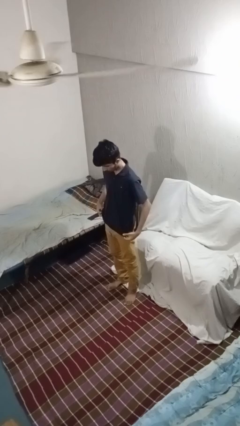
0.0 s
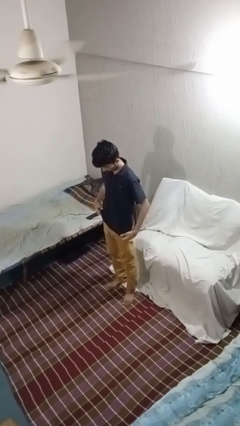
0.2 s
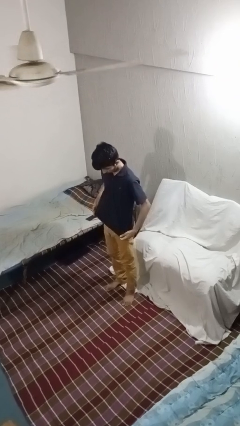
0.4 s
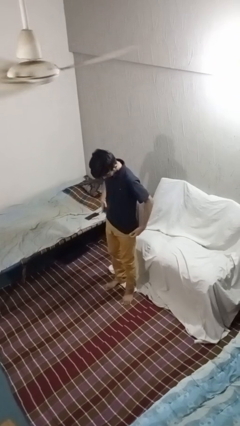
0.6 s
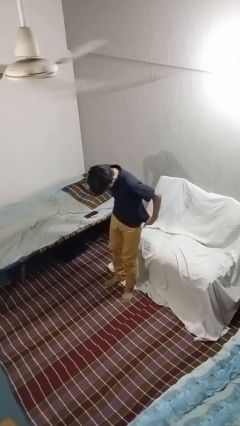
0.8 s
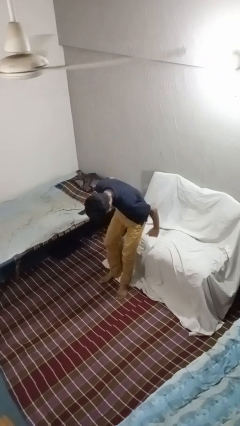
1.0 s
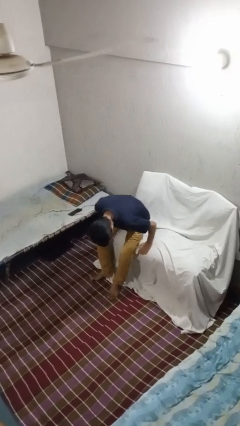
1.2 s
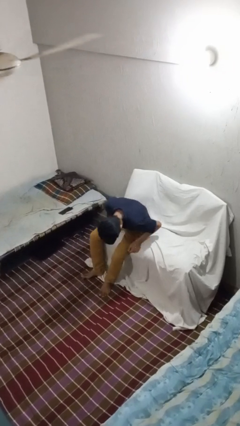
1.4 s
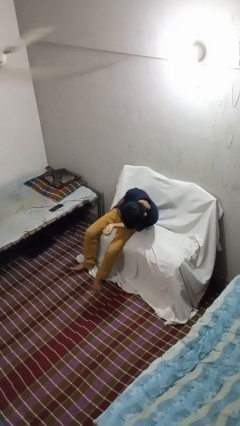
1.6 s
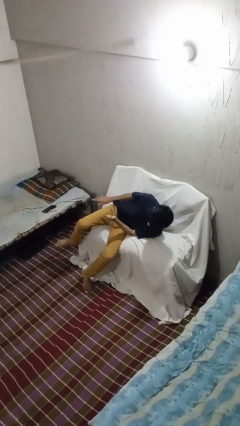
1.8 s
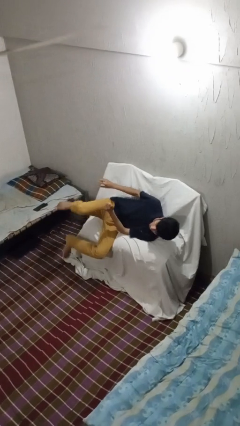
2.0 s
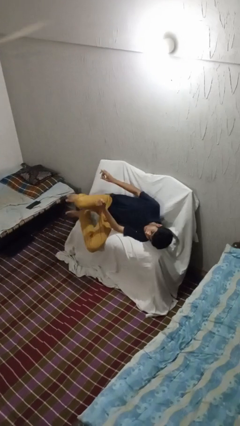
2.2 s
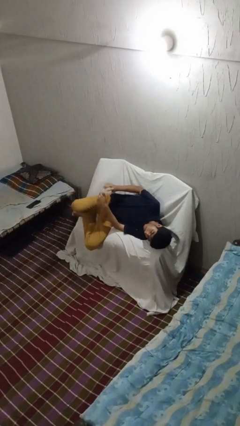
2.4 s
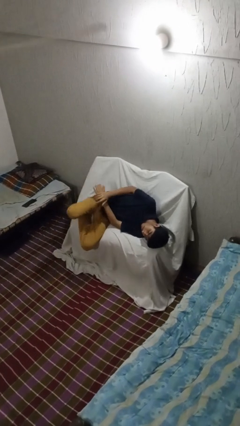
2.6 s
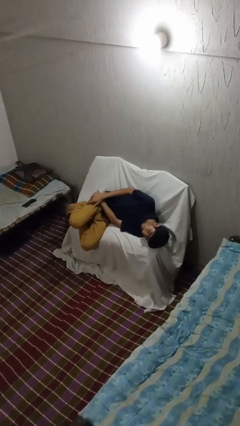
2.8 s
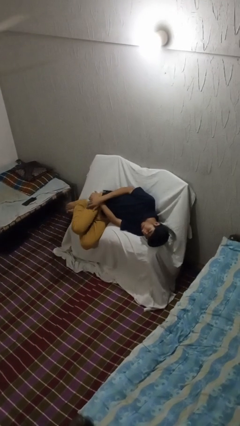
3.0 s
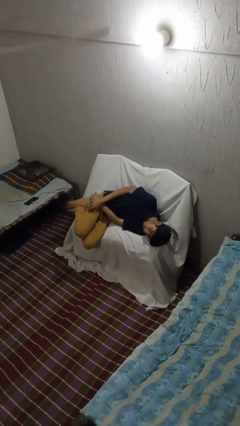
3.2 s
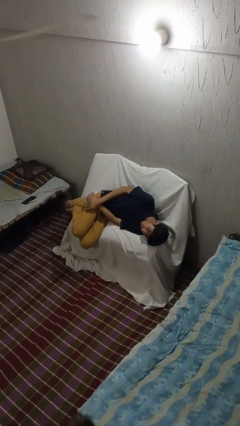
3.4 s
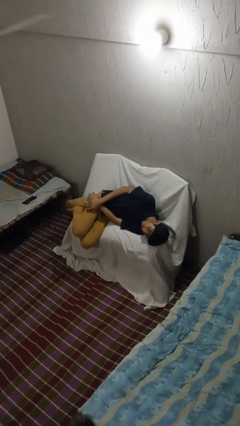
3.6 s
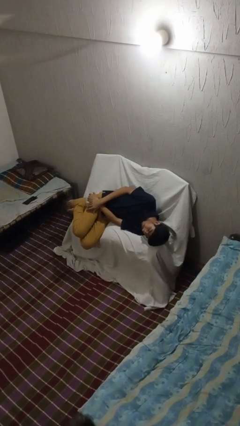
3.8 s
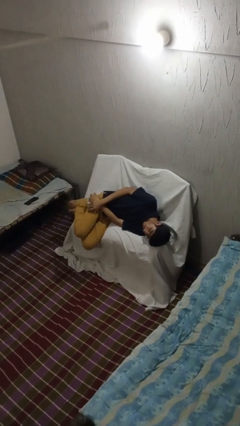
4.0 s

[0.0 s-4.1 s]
person lies down on couch

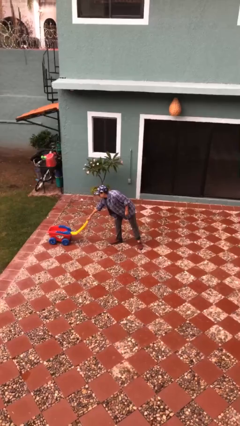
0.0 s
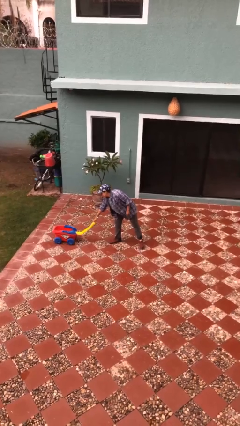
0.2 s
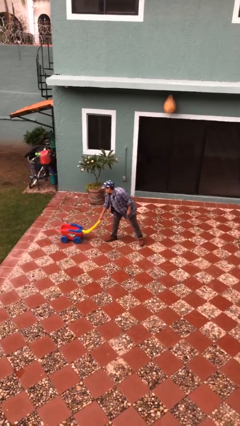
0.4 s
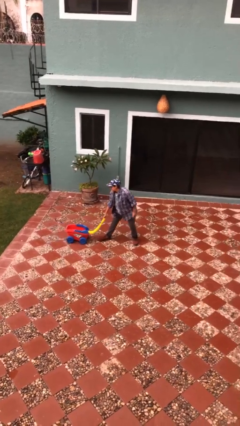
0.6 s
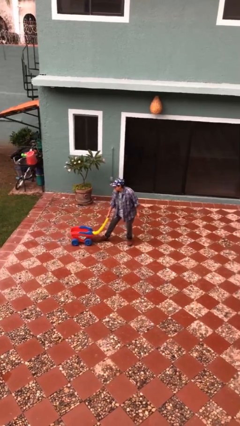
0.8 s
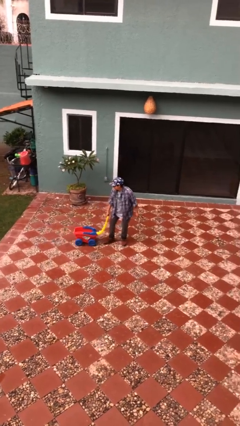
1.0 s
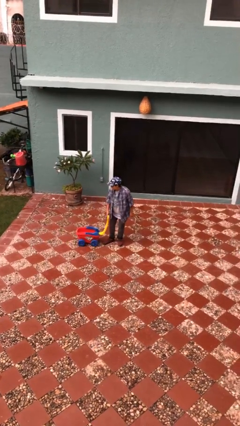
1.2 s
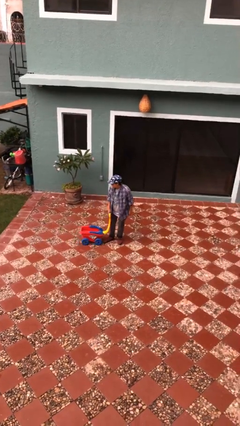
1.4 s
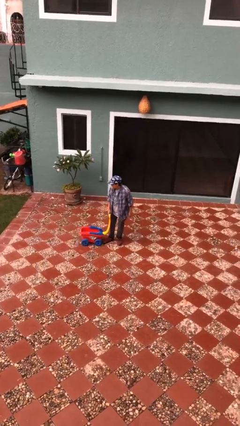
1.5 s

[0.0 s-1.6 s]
person pulls wheeled cart

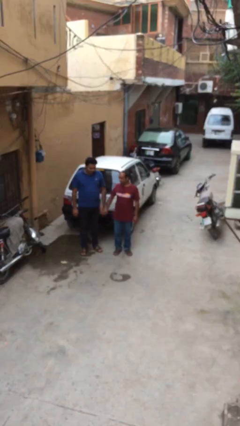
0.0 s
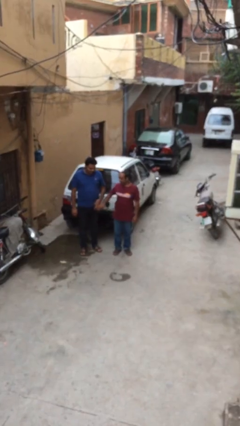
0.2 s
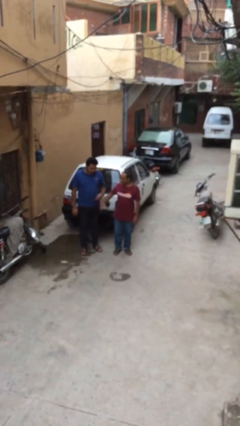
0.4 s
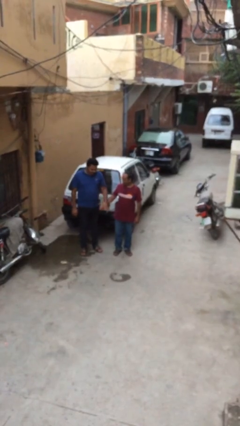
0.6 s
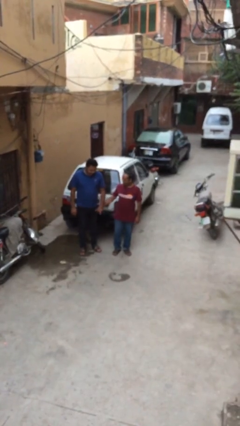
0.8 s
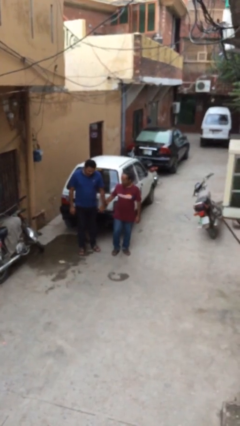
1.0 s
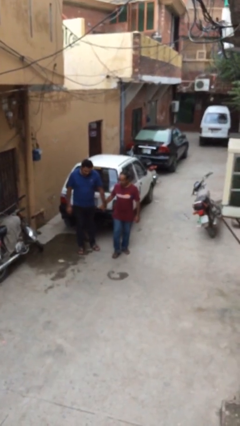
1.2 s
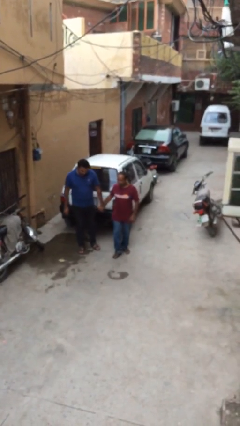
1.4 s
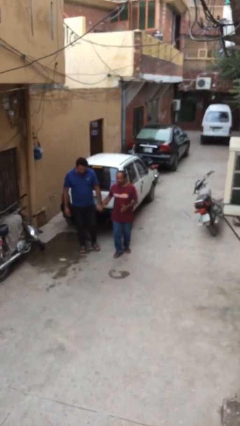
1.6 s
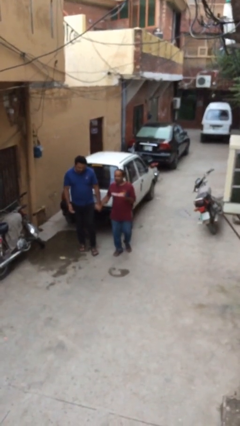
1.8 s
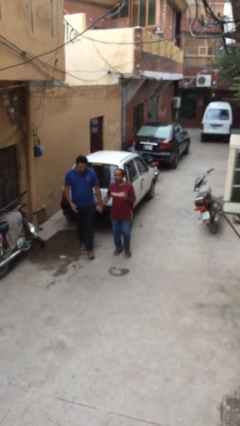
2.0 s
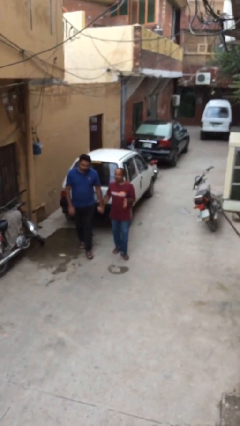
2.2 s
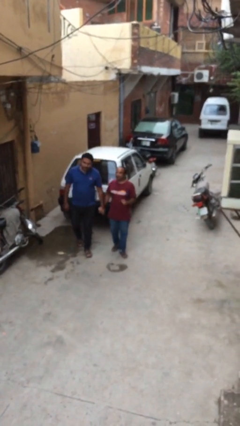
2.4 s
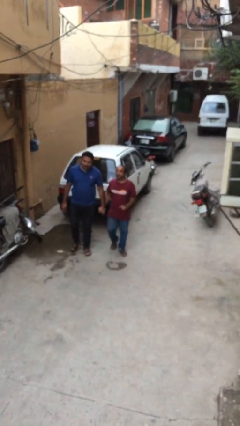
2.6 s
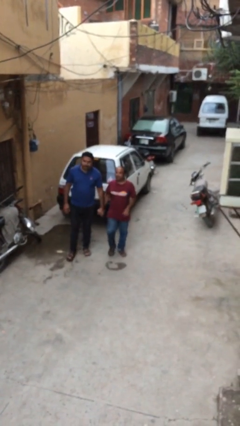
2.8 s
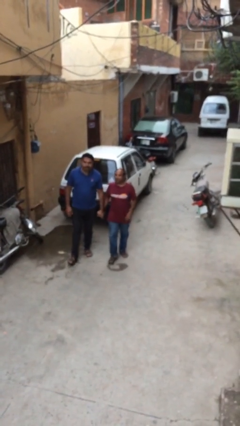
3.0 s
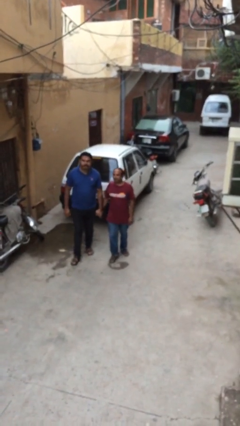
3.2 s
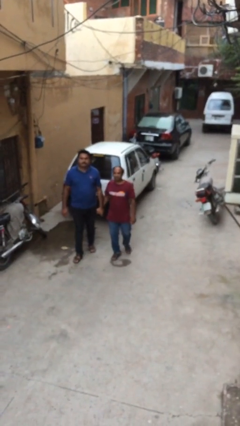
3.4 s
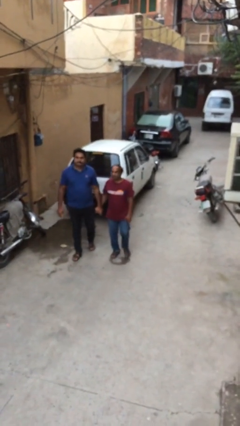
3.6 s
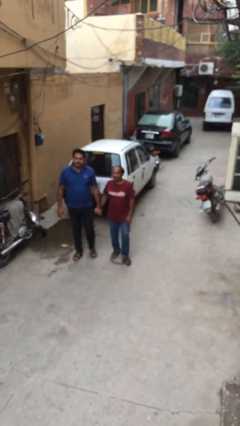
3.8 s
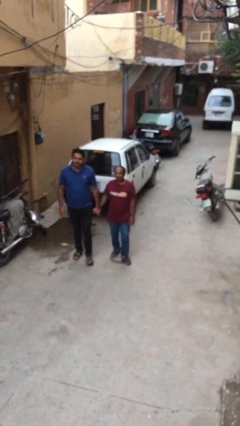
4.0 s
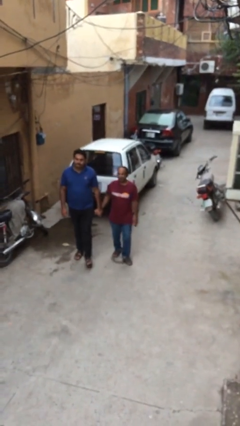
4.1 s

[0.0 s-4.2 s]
person holds hand

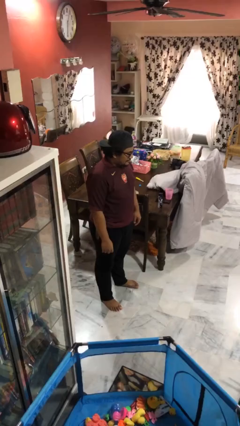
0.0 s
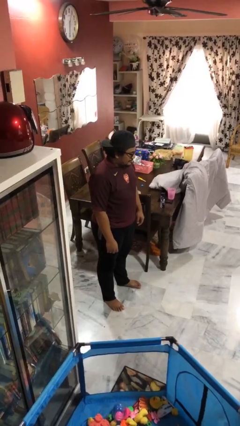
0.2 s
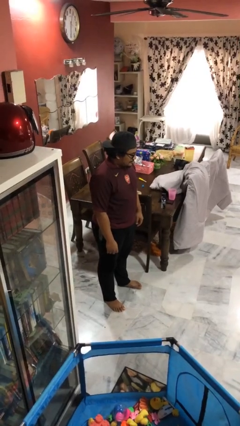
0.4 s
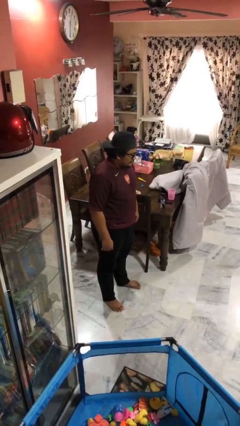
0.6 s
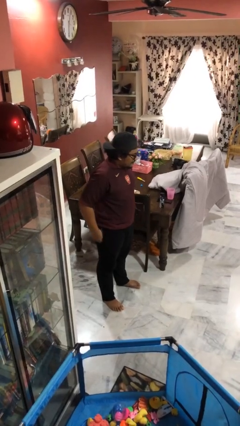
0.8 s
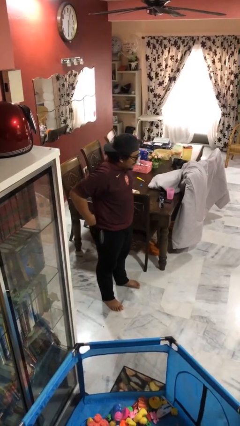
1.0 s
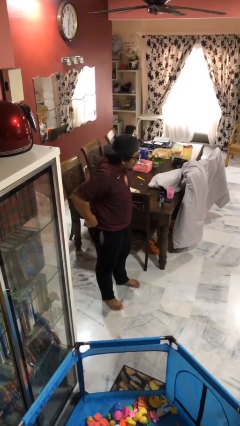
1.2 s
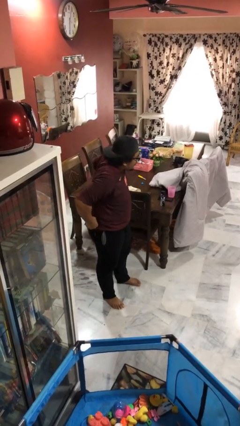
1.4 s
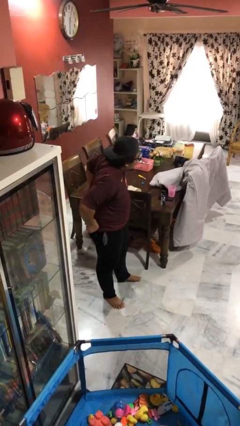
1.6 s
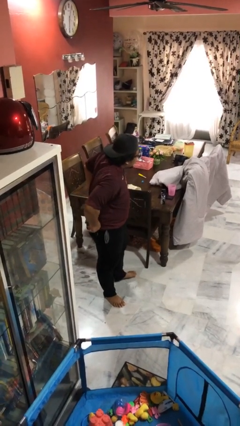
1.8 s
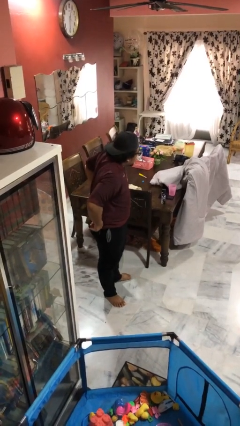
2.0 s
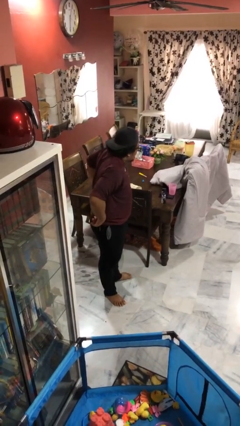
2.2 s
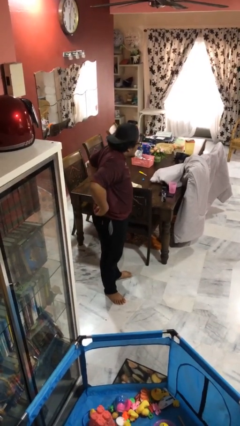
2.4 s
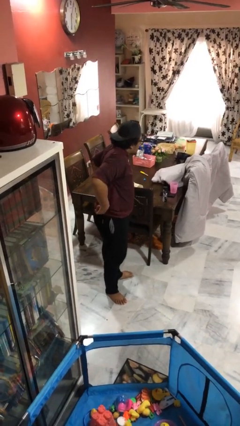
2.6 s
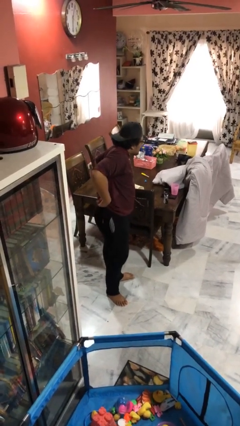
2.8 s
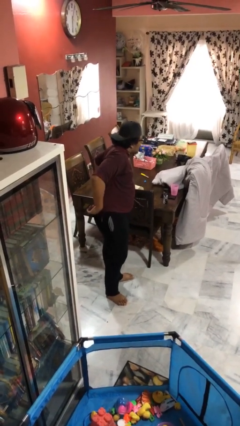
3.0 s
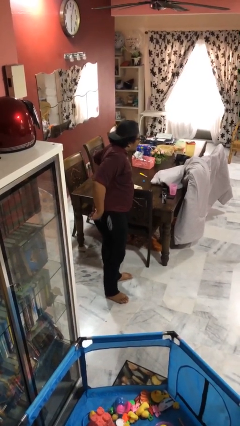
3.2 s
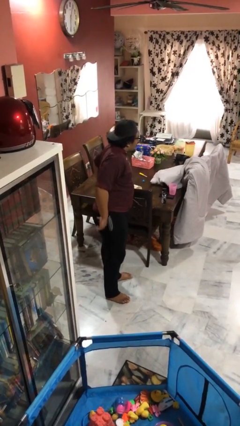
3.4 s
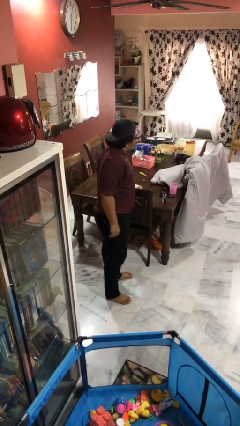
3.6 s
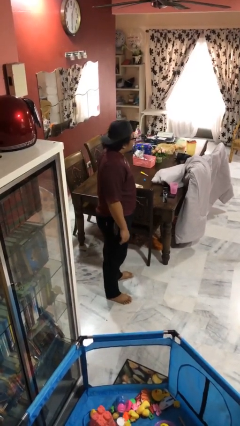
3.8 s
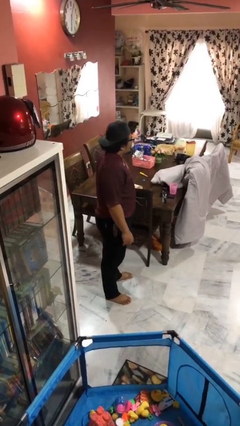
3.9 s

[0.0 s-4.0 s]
person hikes up pants

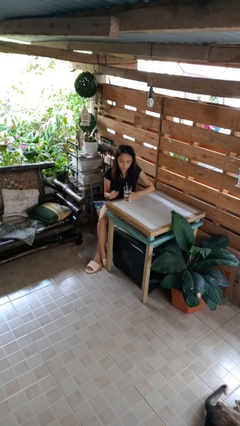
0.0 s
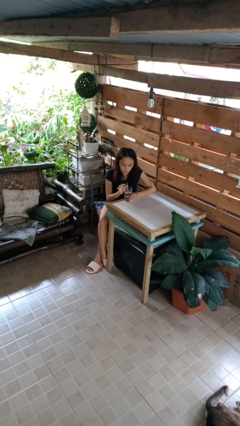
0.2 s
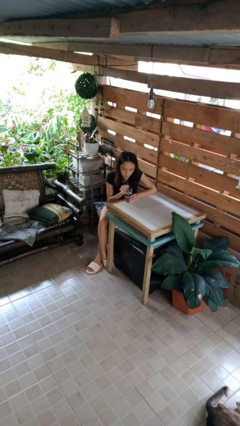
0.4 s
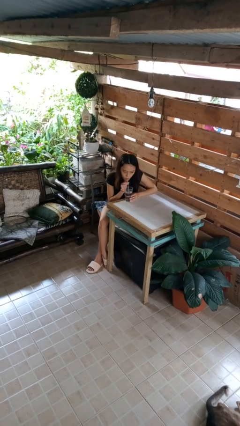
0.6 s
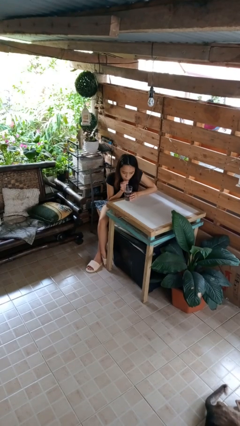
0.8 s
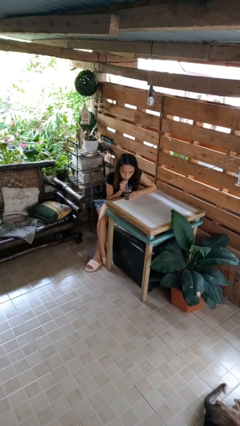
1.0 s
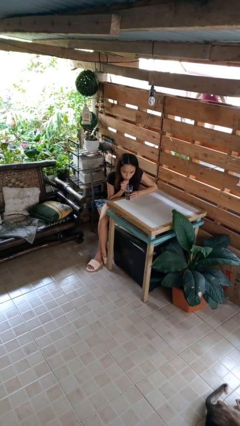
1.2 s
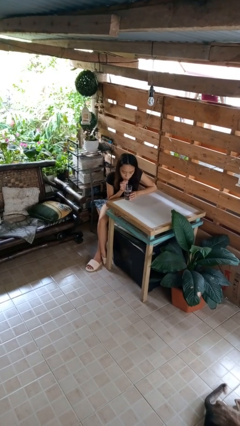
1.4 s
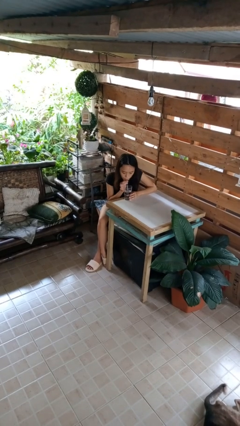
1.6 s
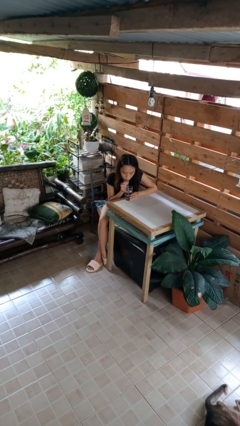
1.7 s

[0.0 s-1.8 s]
person drinks from straw

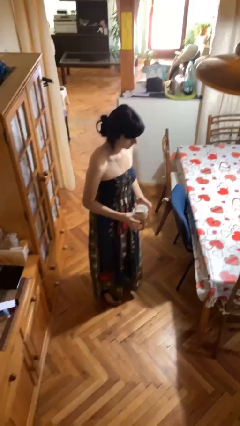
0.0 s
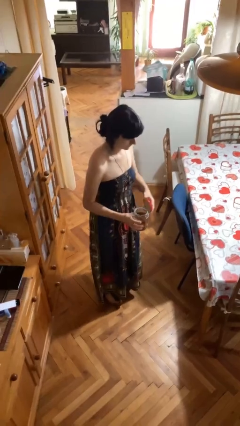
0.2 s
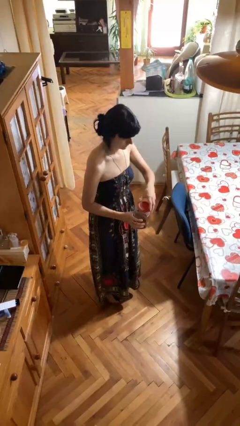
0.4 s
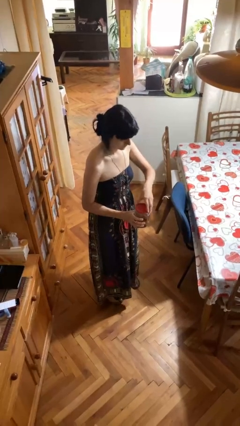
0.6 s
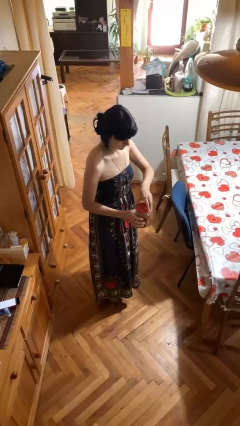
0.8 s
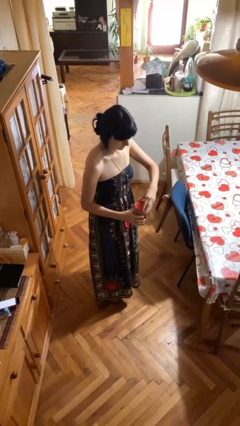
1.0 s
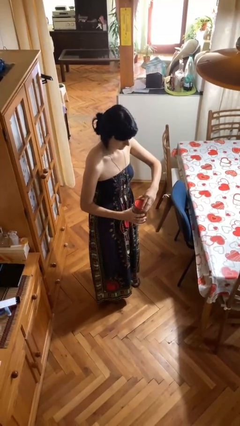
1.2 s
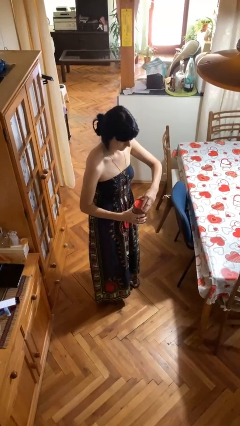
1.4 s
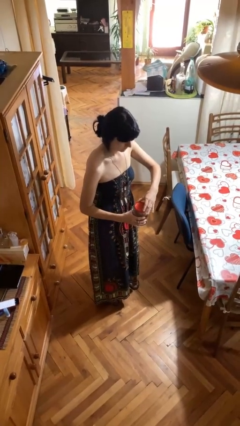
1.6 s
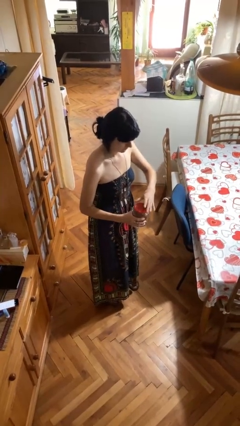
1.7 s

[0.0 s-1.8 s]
person closes jar

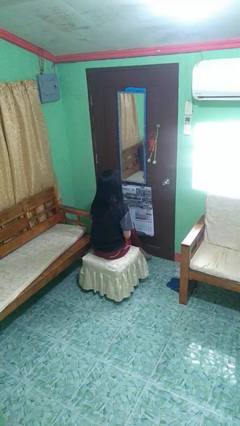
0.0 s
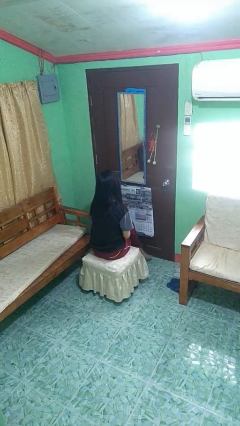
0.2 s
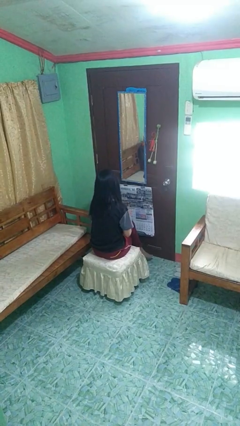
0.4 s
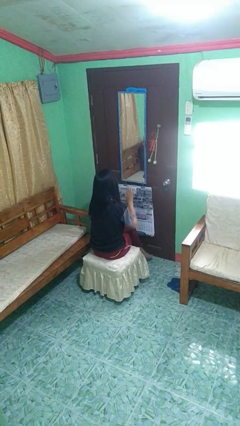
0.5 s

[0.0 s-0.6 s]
person gestures come here
